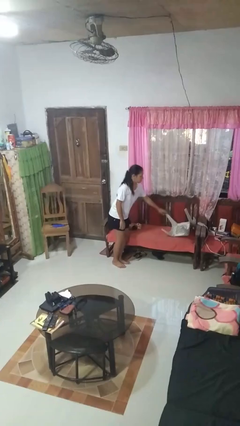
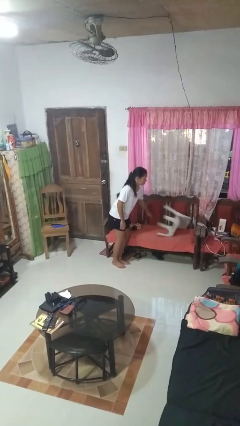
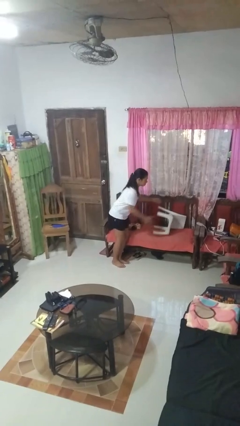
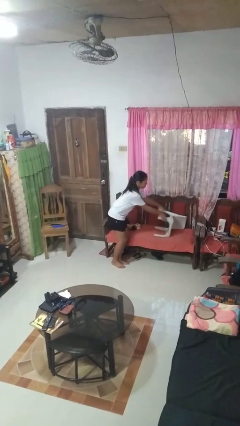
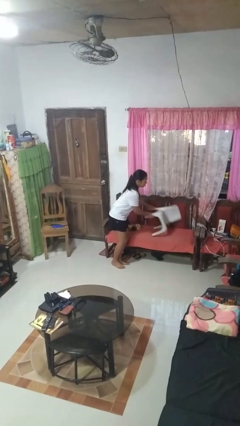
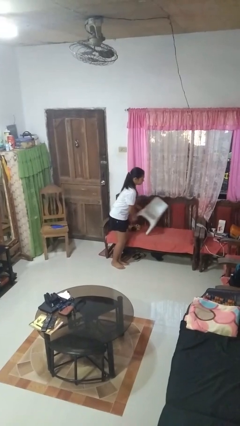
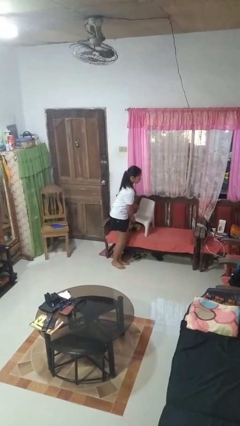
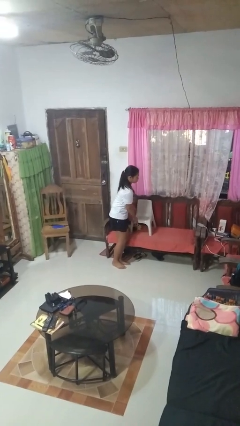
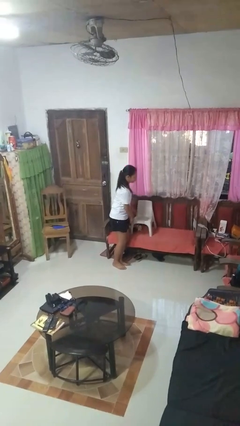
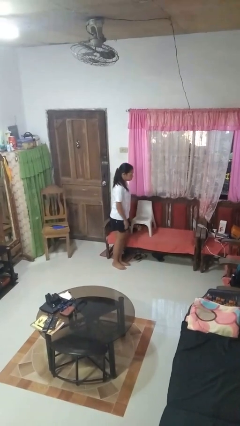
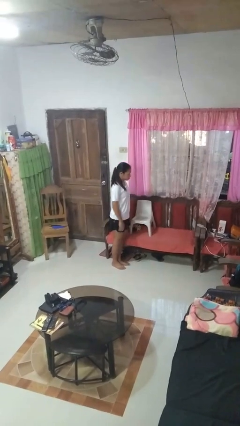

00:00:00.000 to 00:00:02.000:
person sets upright furniture

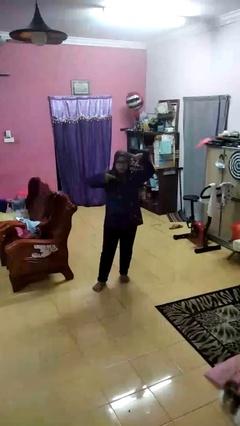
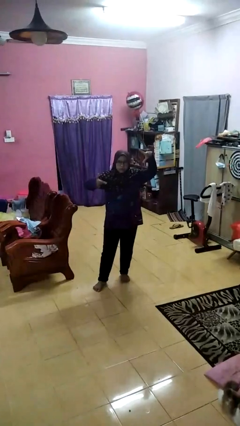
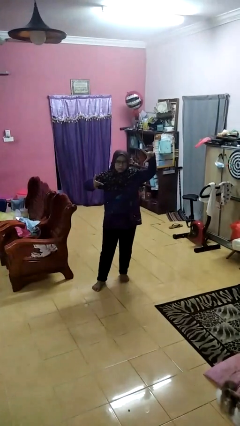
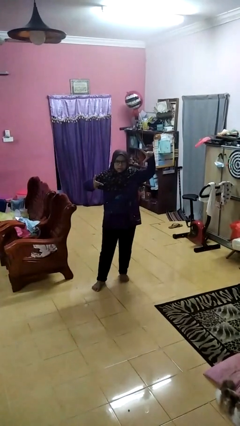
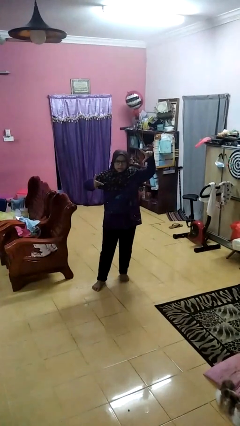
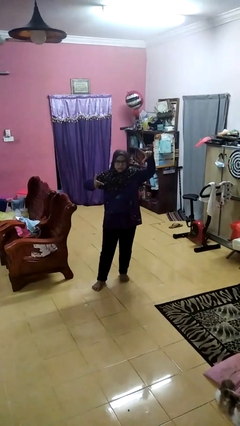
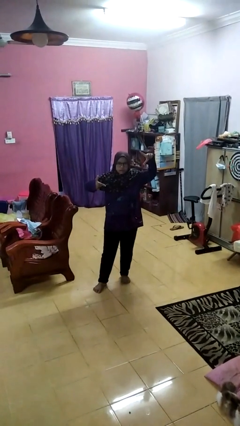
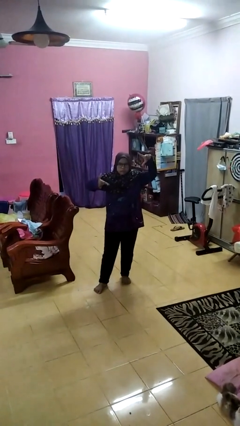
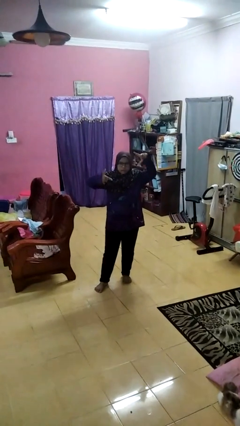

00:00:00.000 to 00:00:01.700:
person gestures zoom out

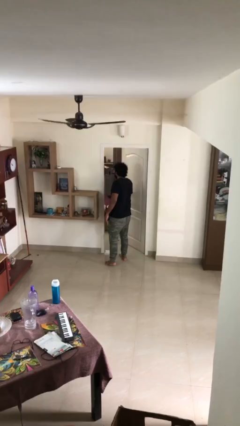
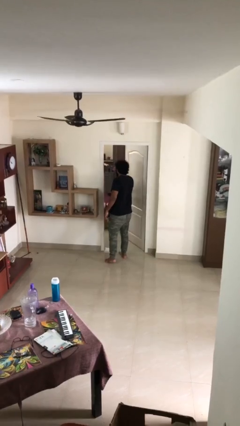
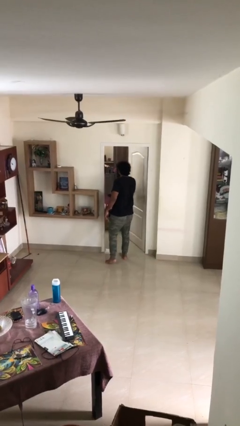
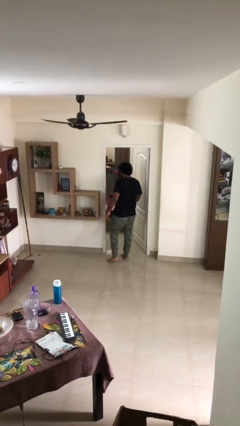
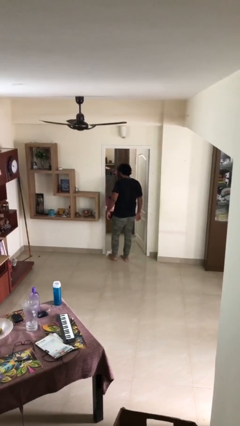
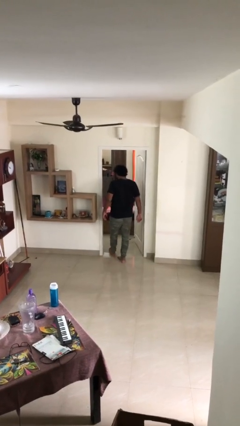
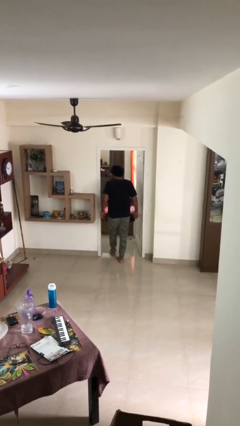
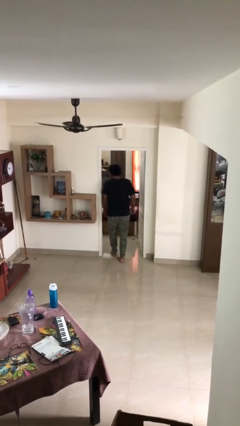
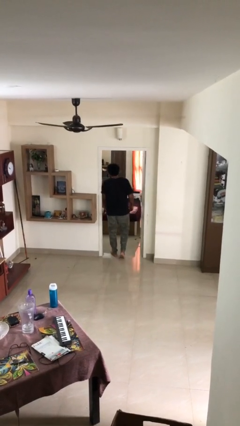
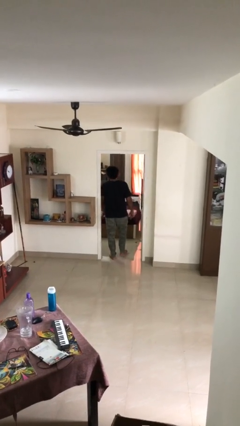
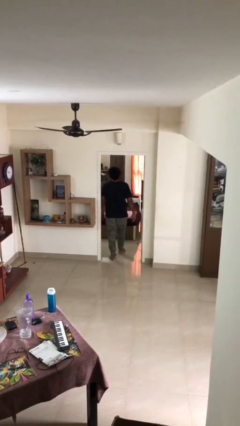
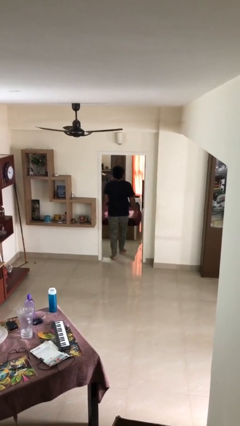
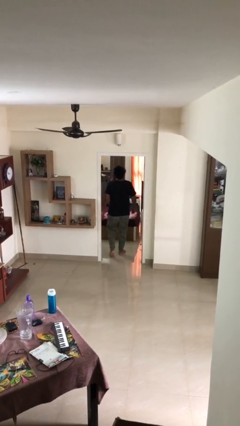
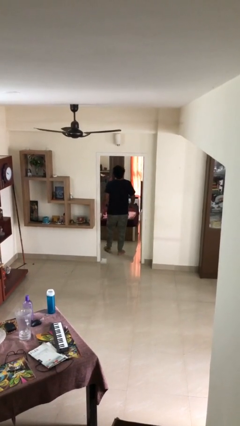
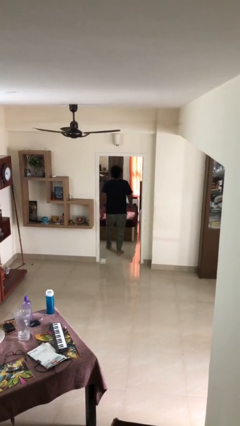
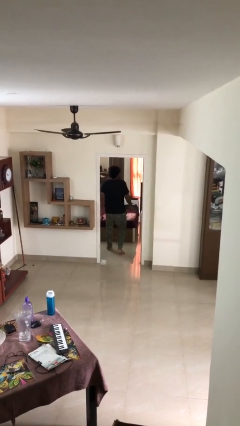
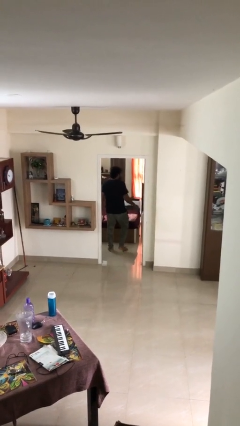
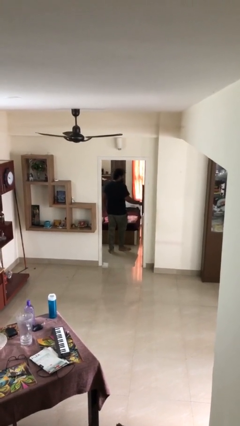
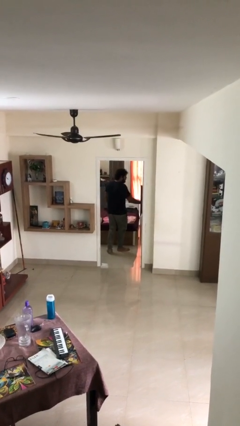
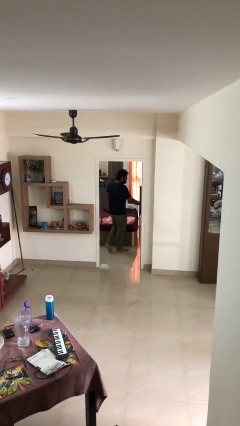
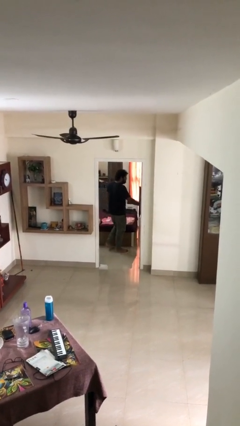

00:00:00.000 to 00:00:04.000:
person exits scene through structure

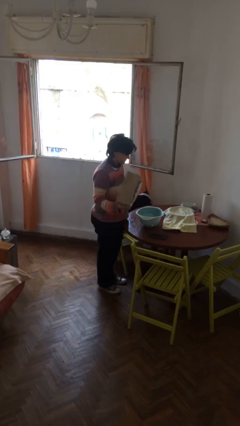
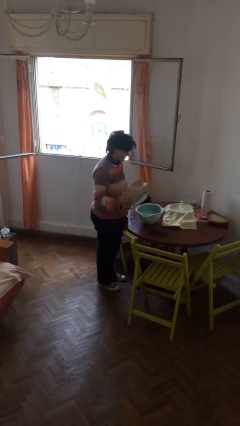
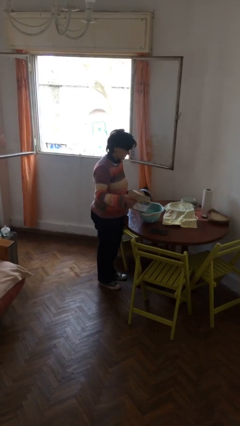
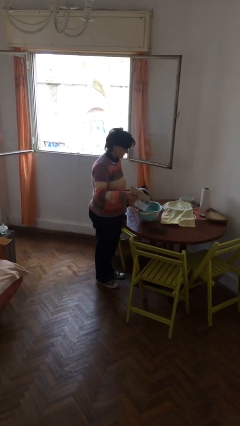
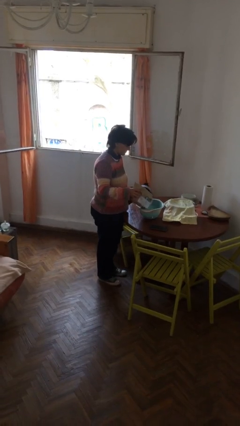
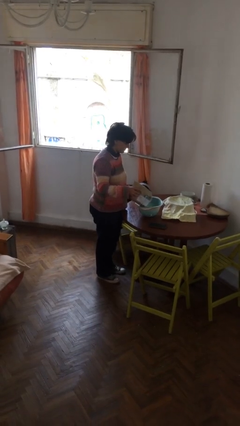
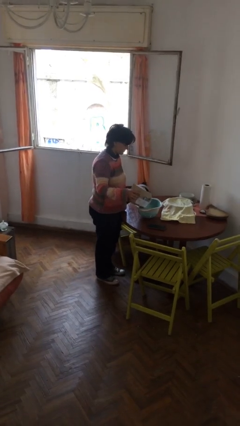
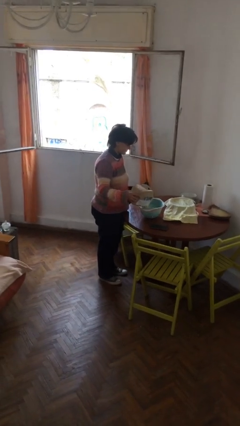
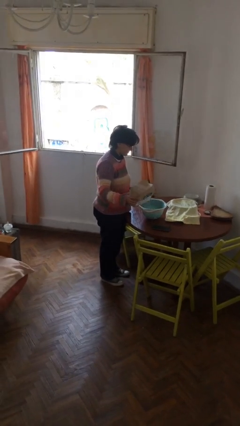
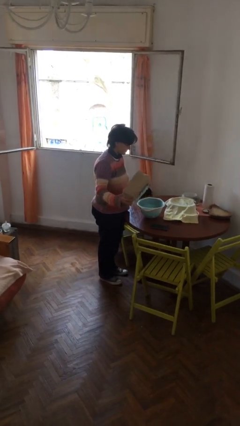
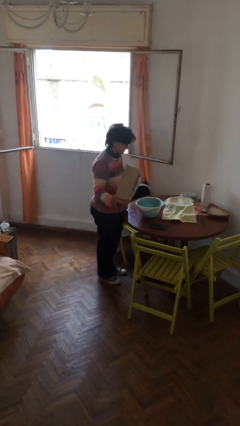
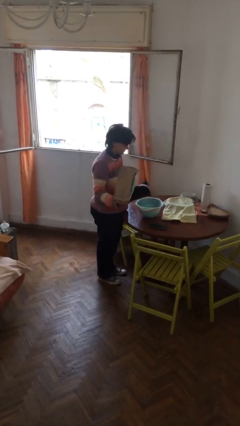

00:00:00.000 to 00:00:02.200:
person pours into bowl

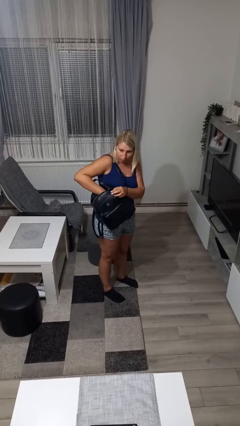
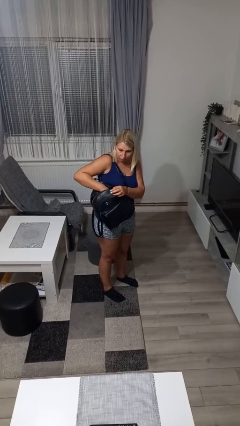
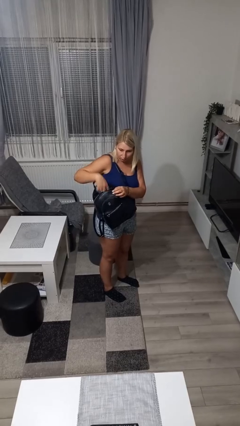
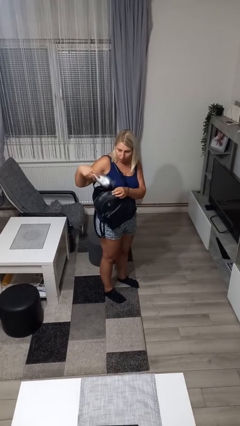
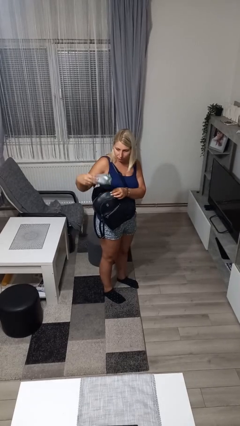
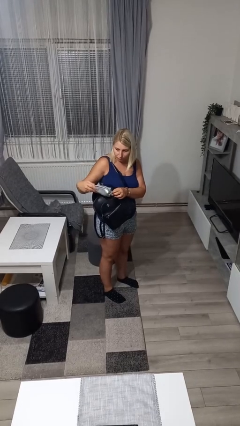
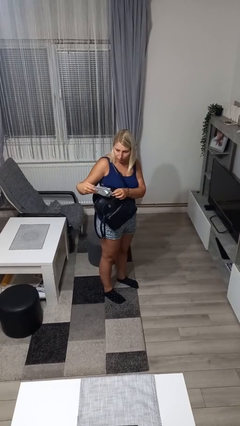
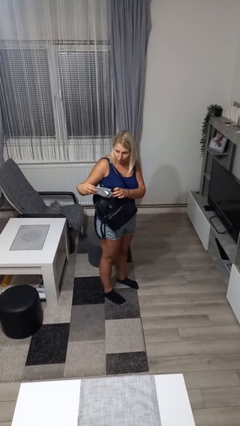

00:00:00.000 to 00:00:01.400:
person takes object from backpack

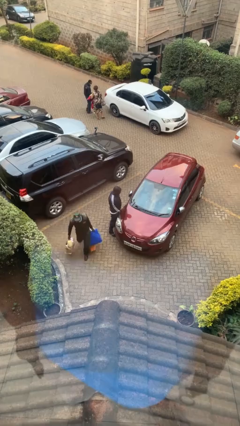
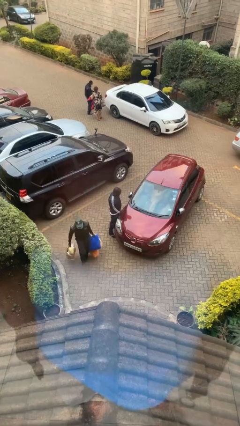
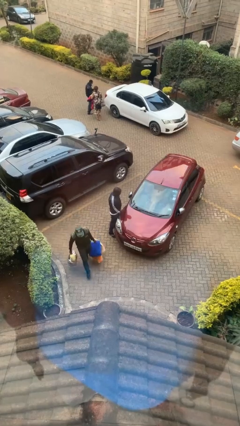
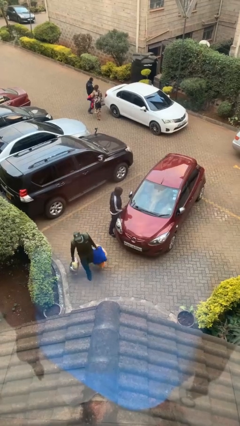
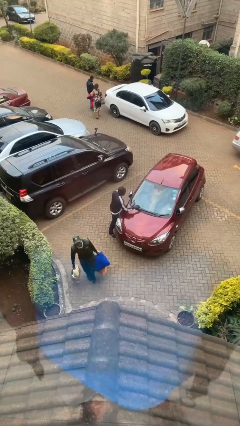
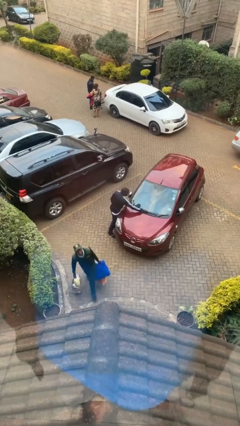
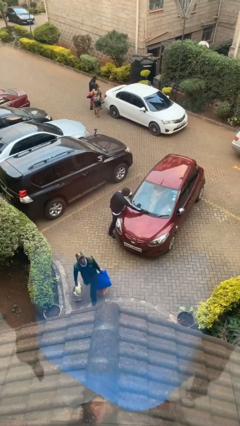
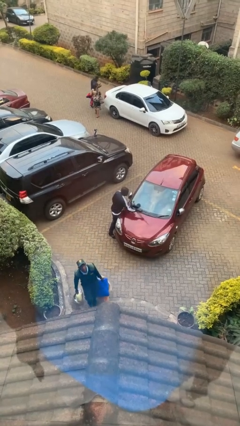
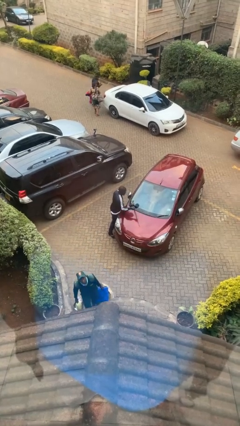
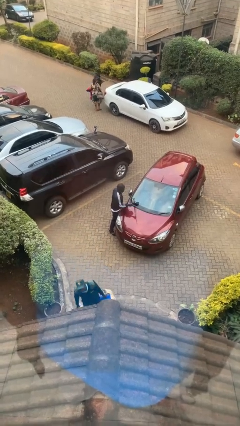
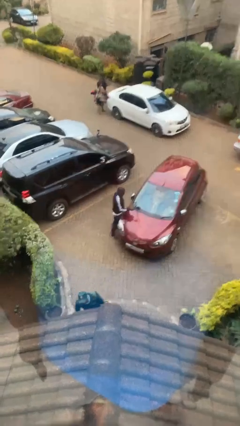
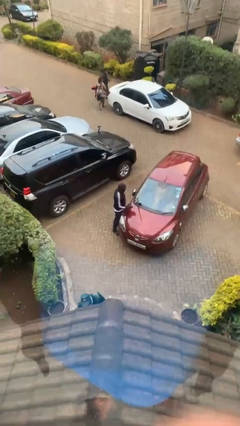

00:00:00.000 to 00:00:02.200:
person flips up car wipers

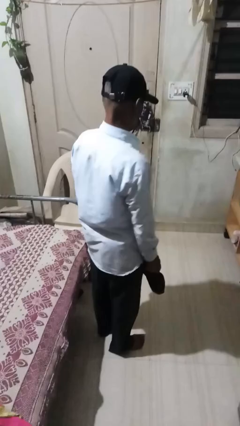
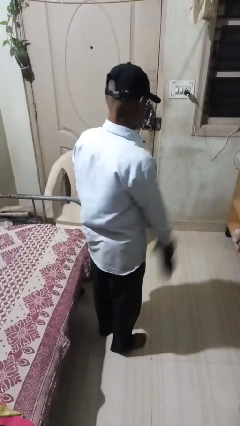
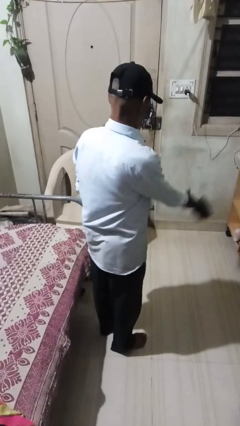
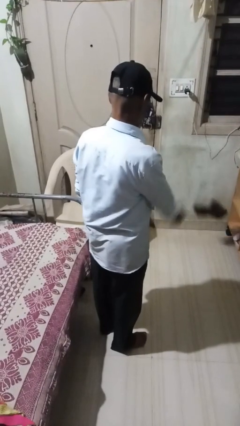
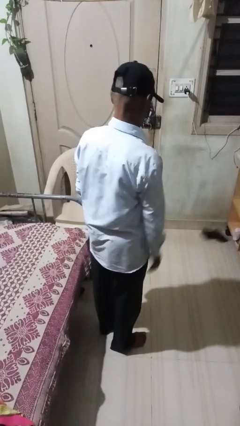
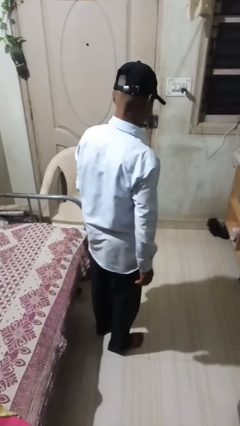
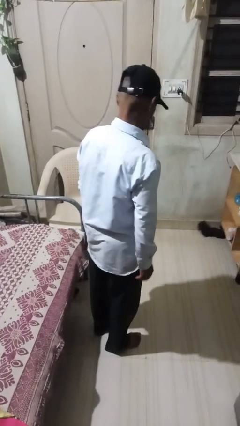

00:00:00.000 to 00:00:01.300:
person throws object to ground

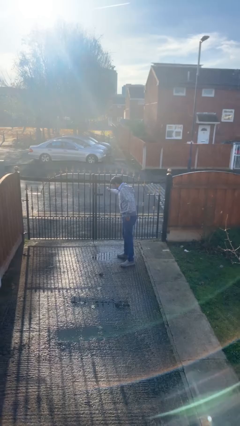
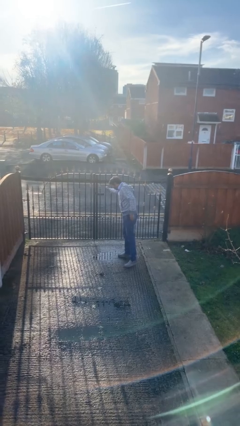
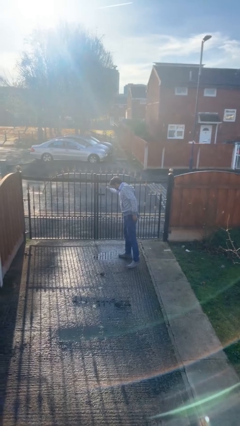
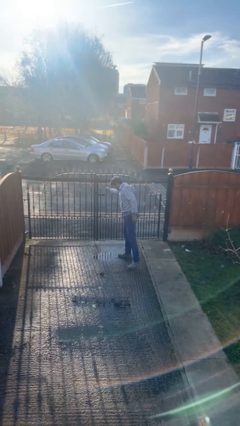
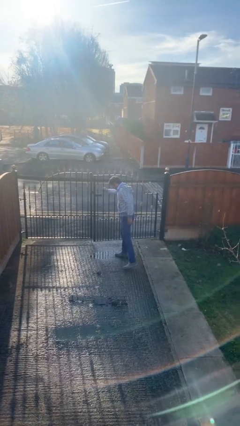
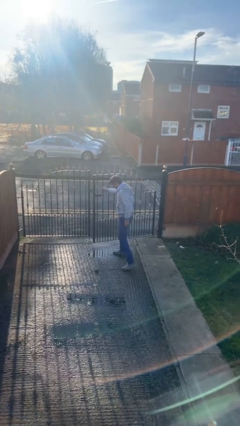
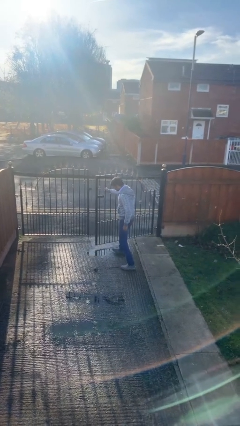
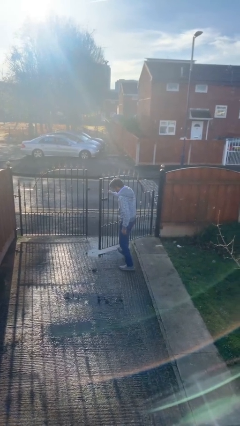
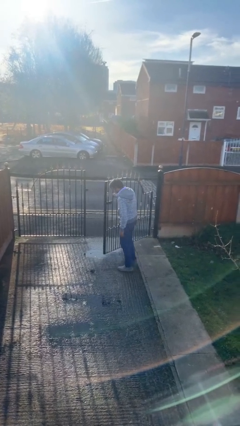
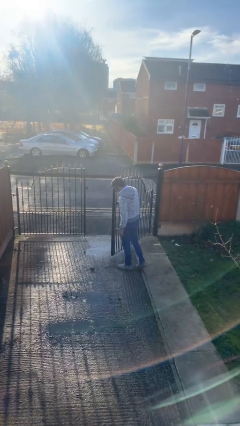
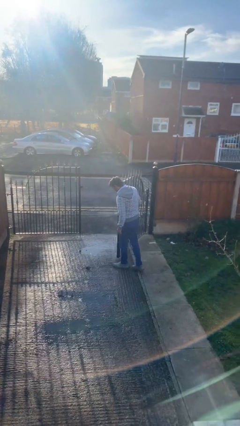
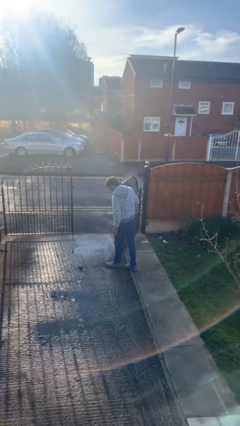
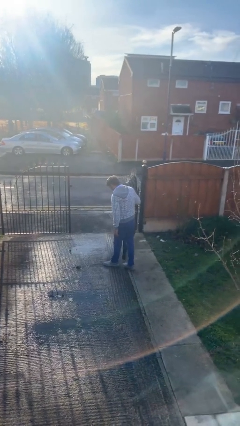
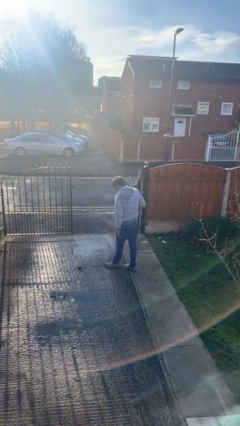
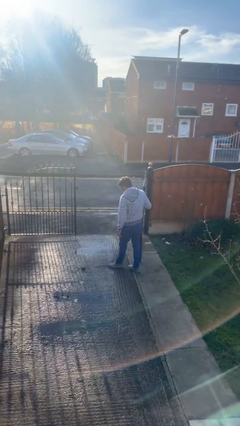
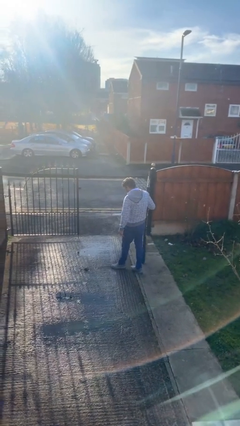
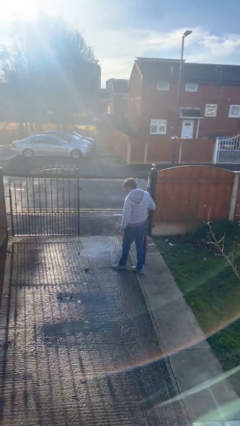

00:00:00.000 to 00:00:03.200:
person opens facility door
